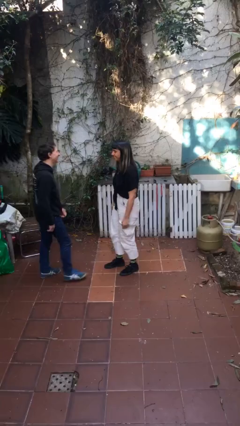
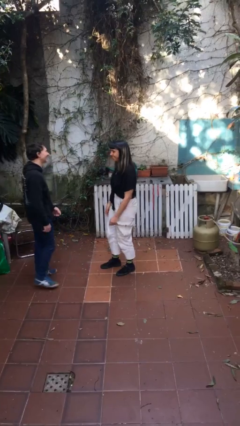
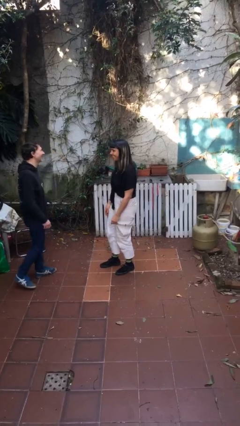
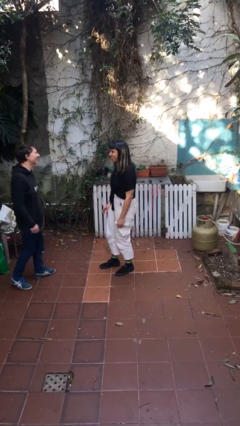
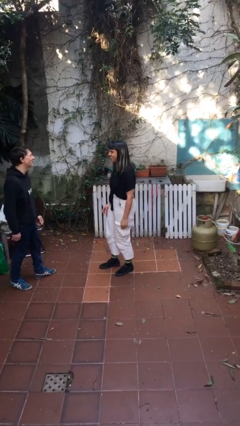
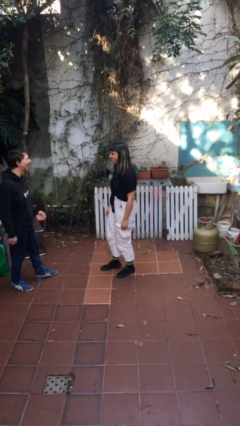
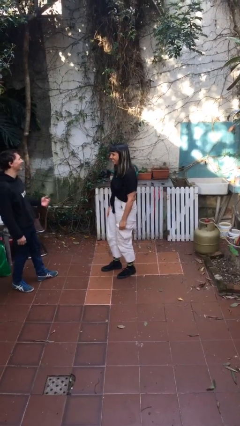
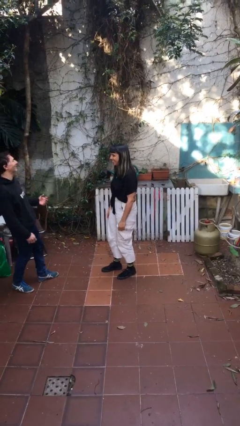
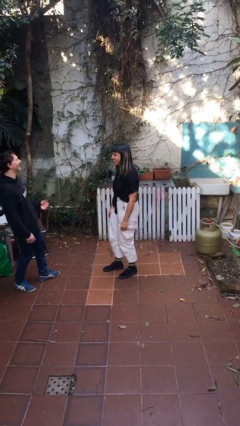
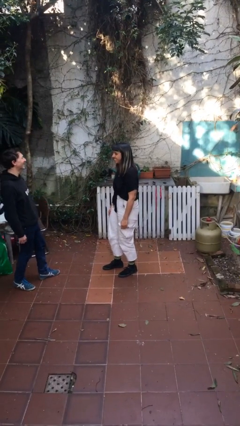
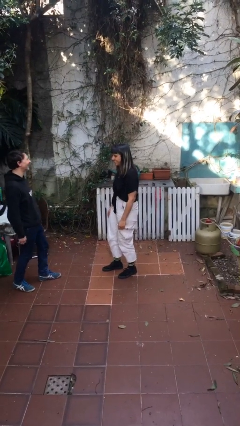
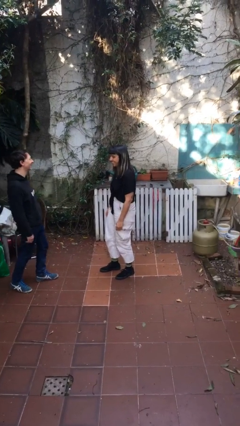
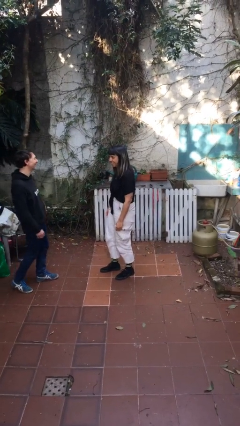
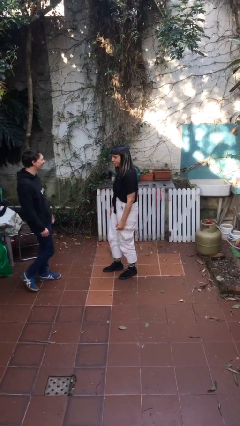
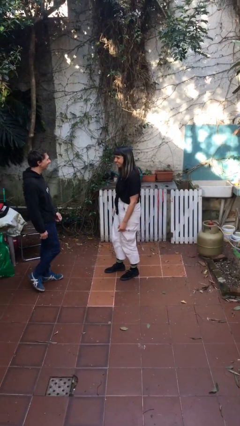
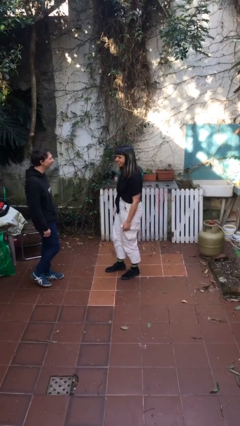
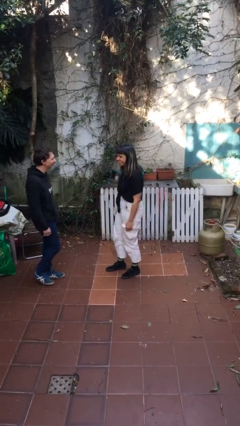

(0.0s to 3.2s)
person talks to person

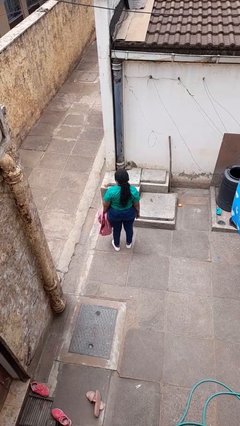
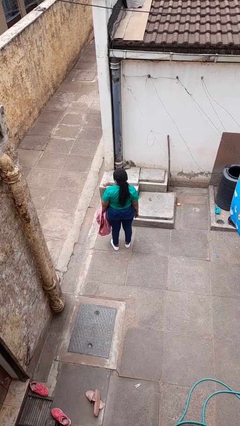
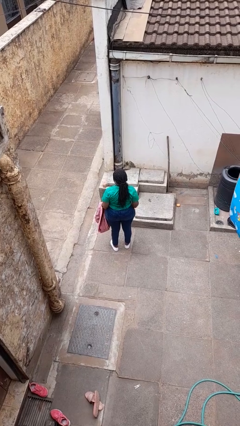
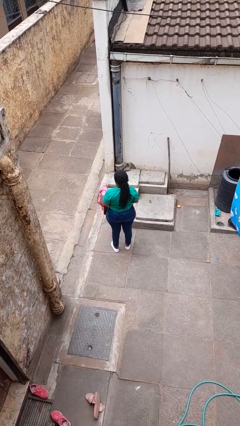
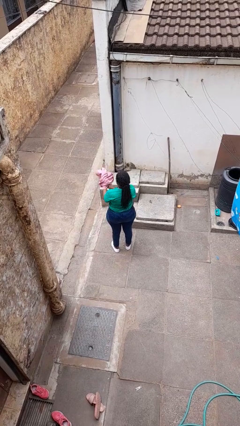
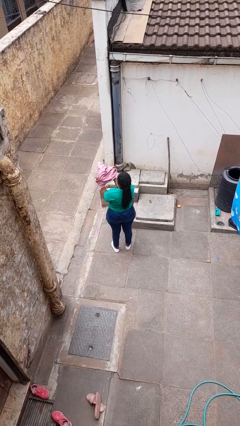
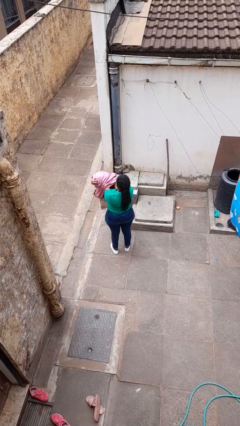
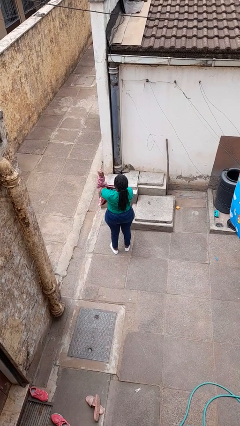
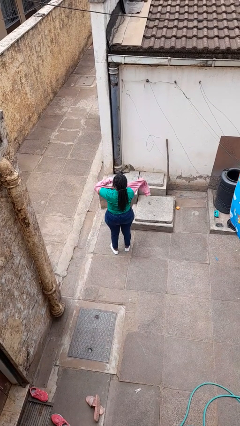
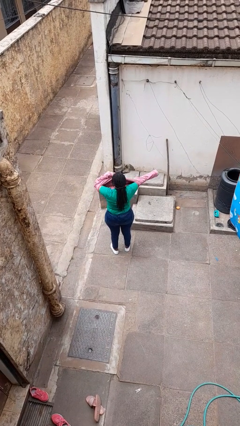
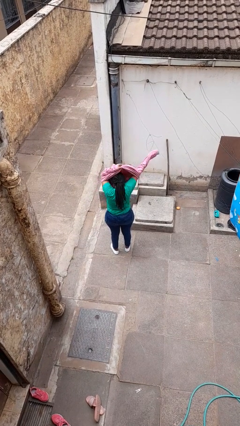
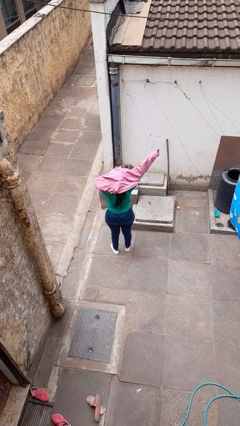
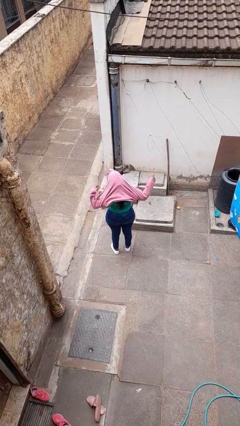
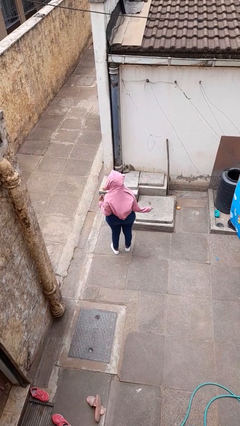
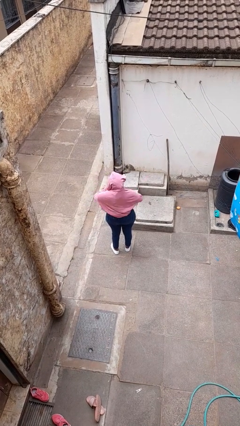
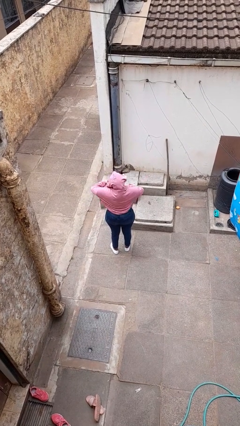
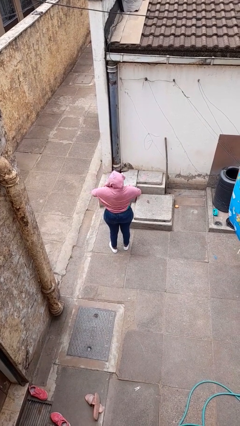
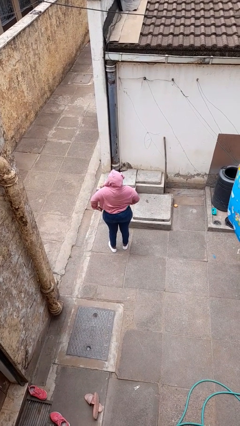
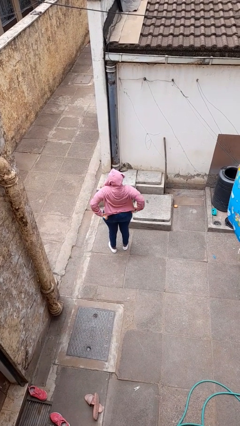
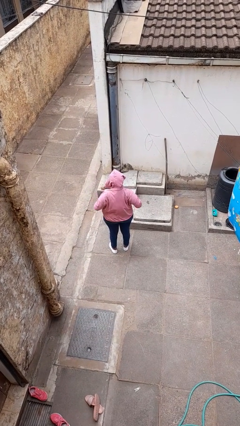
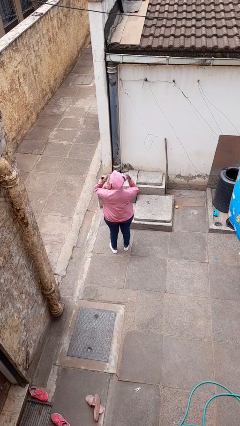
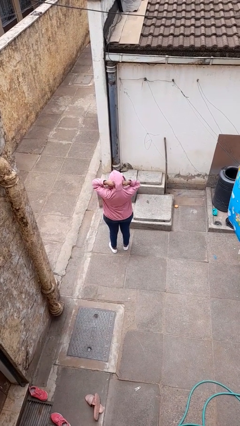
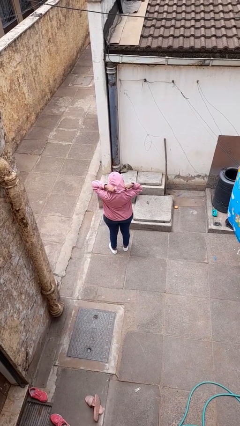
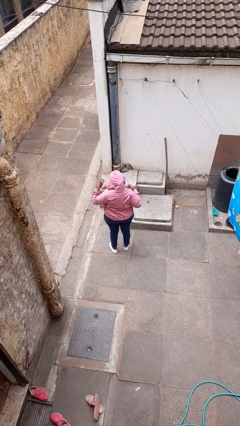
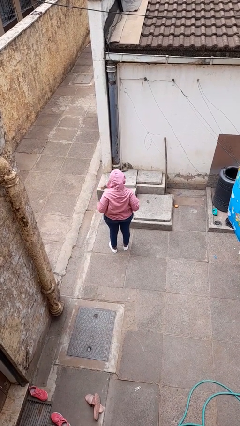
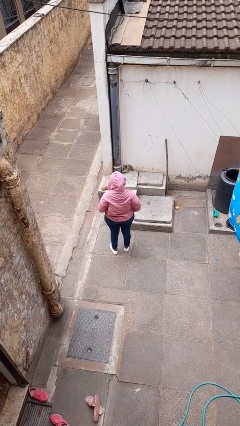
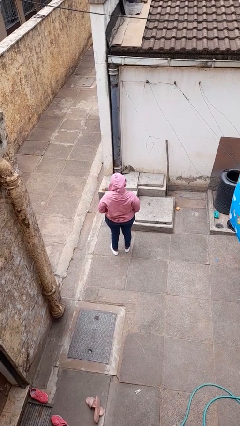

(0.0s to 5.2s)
person puts on hoodie

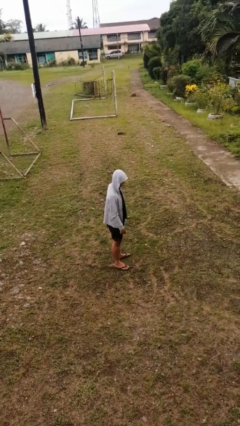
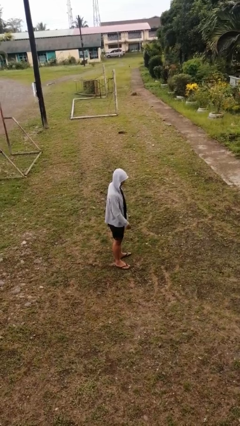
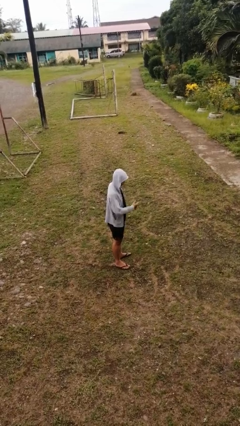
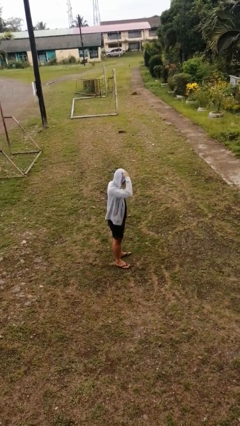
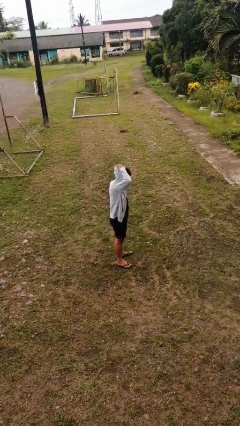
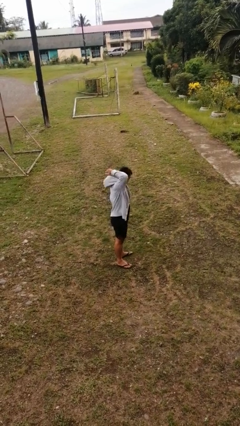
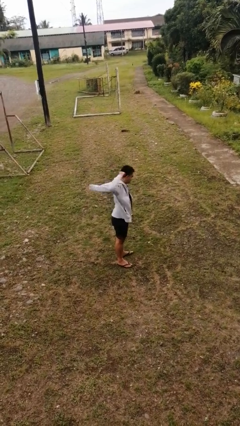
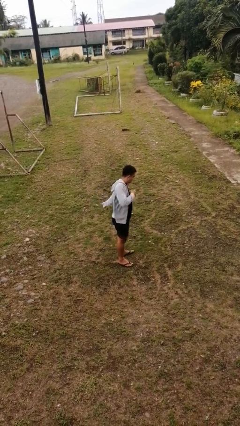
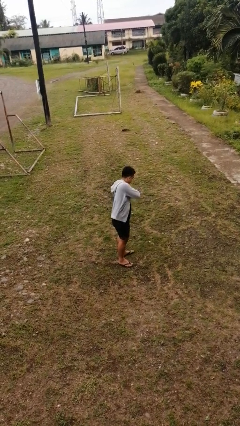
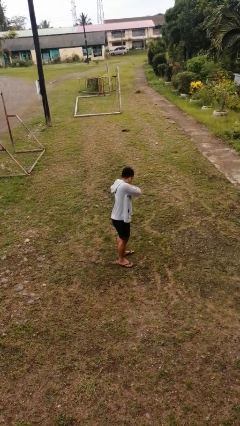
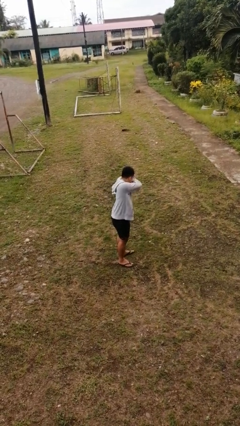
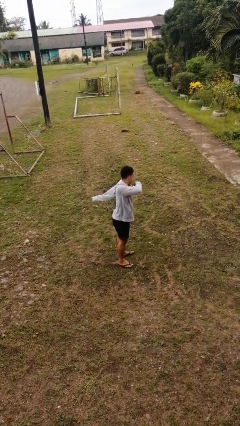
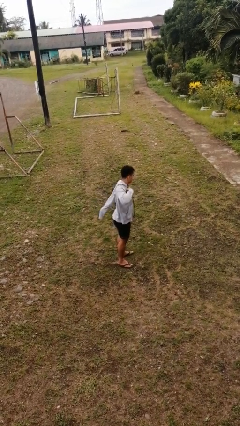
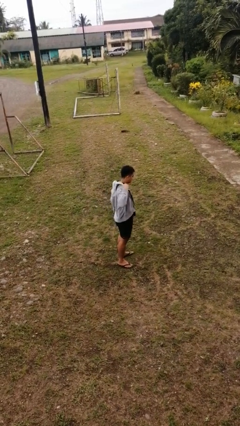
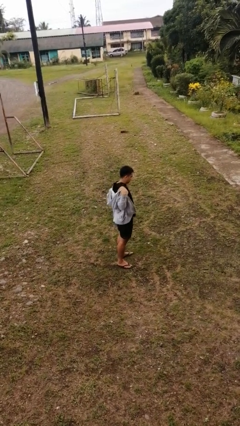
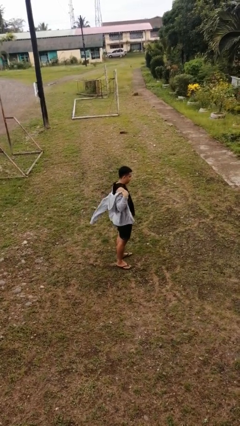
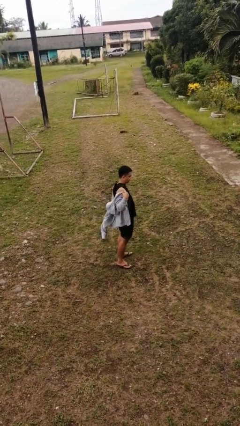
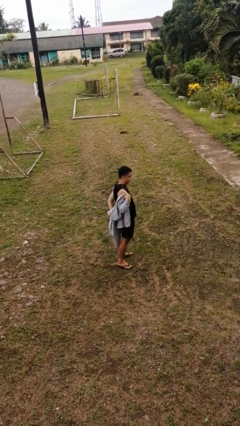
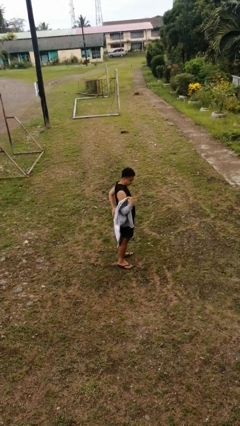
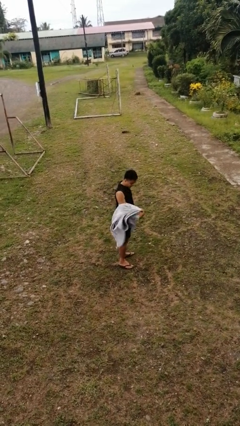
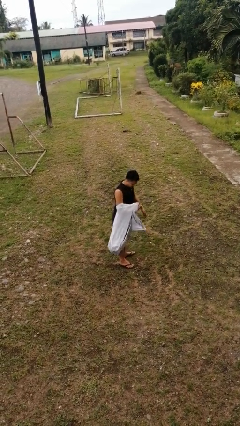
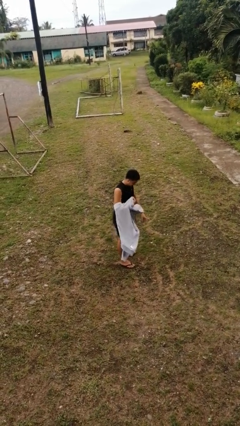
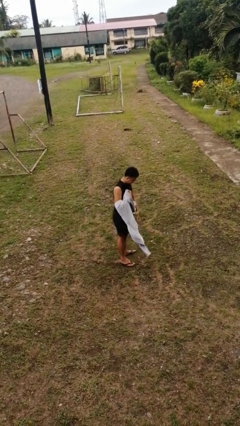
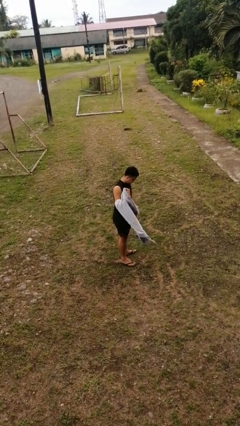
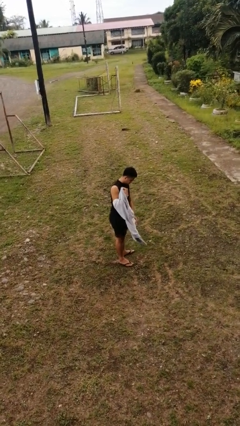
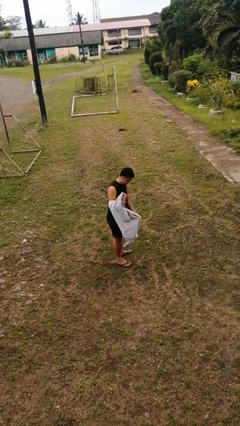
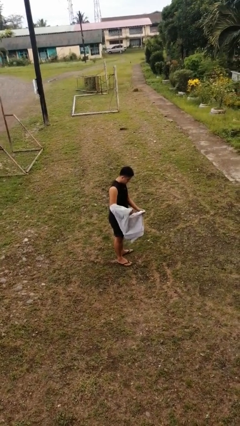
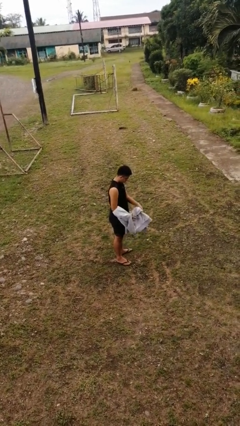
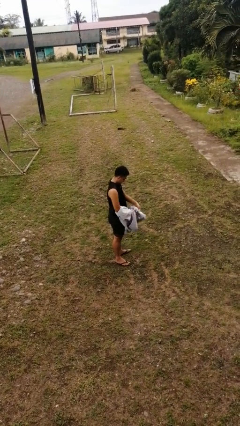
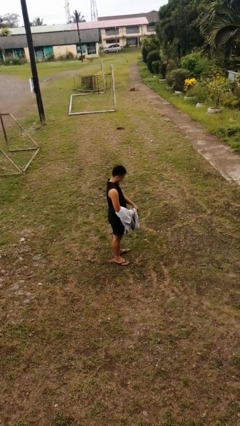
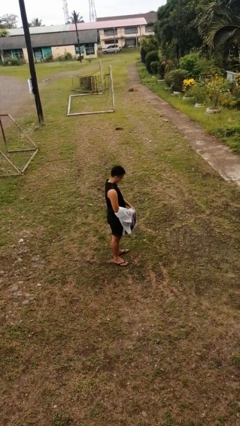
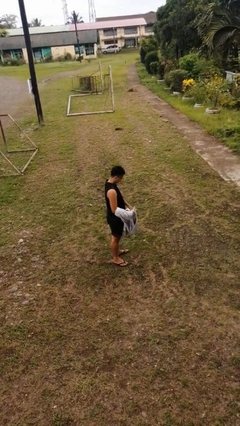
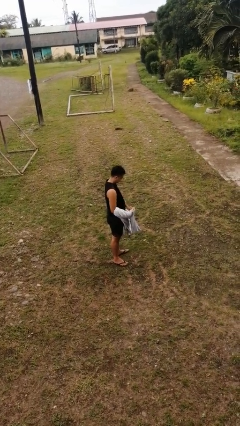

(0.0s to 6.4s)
person takes off hoodie

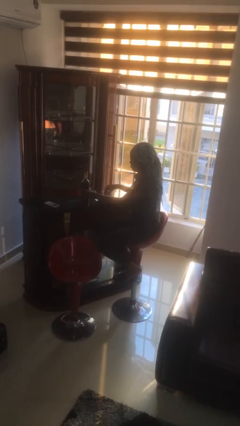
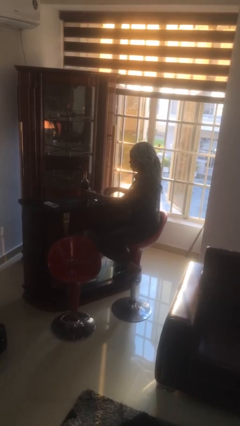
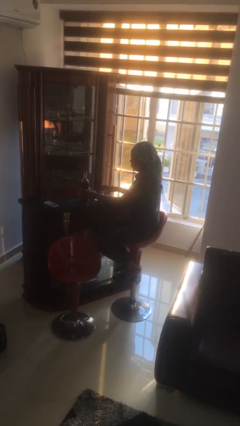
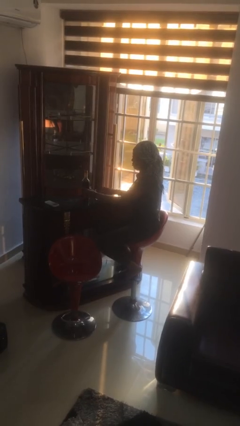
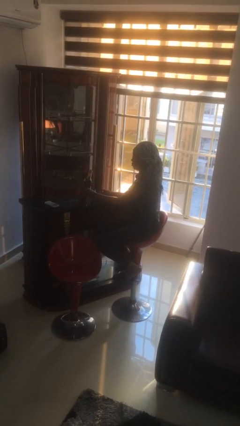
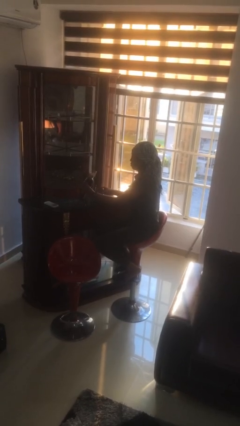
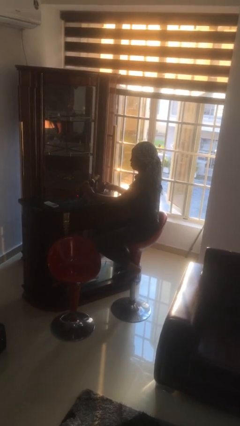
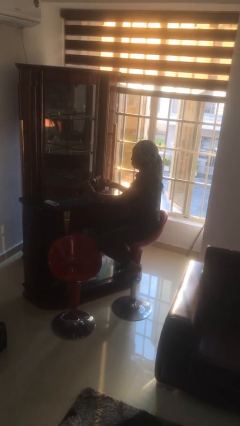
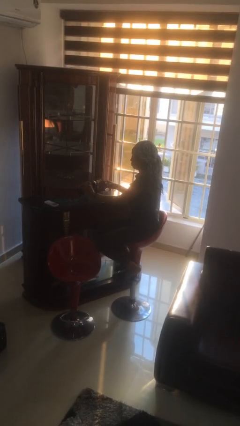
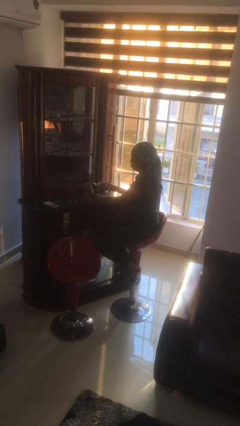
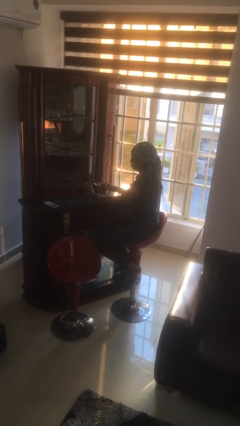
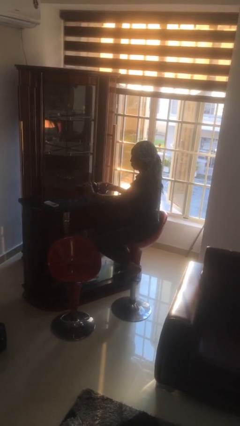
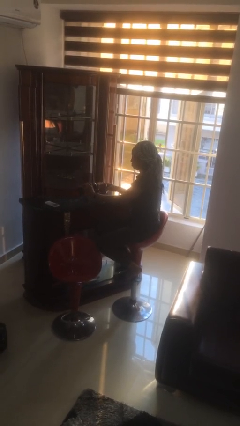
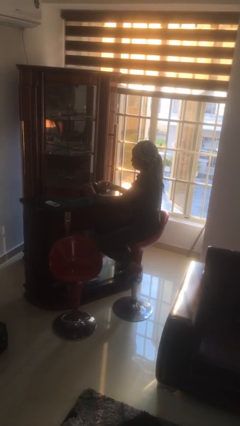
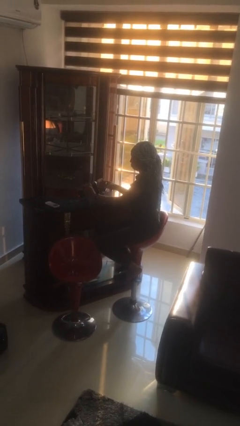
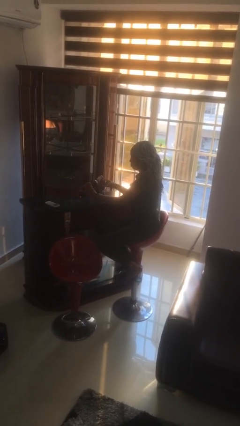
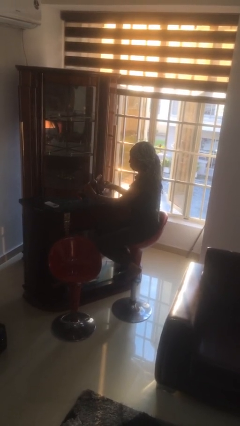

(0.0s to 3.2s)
person pours liquid into cup

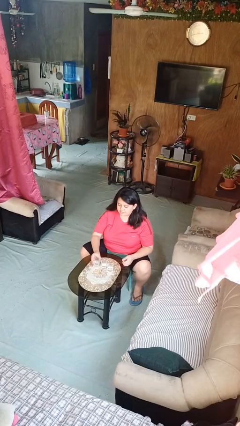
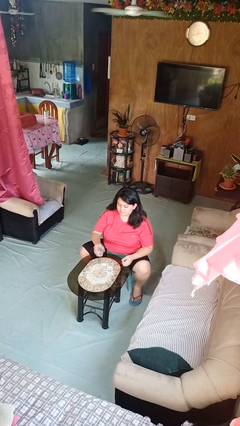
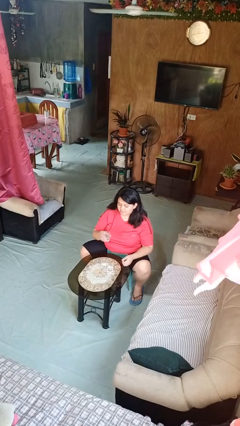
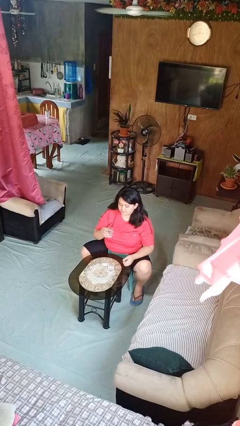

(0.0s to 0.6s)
person picks up object from table
